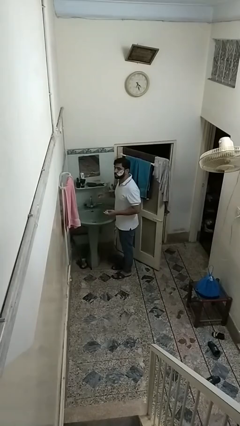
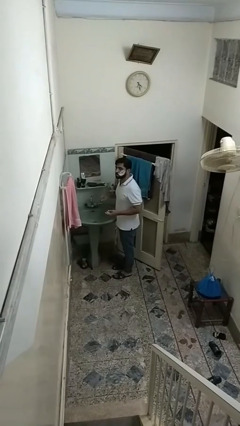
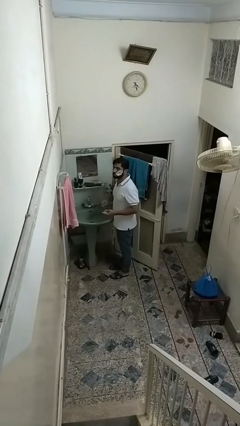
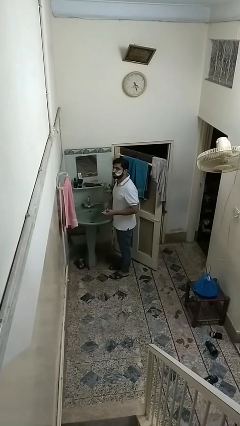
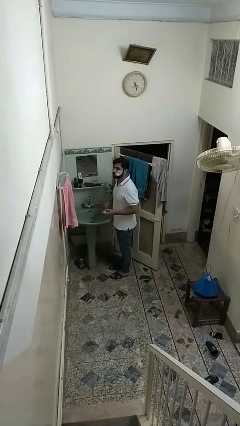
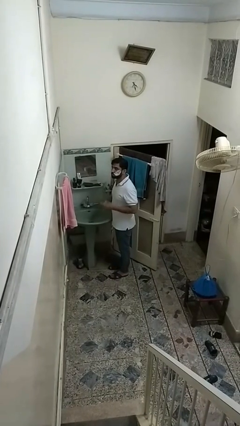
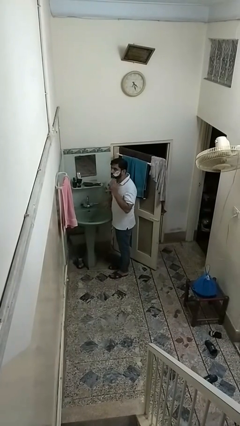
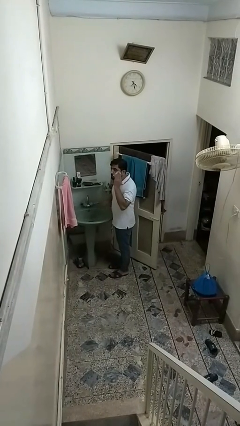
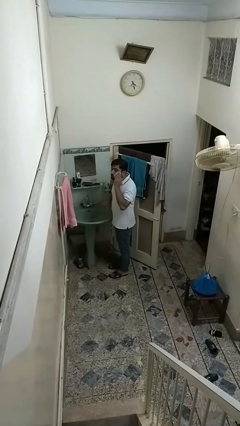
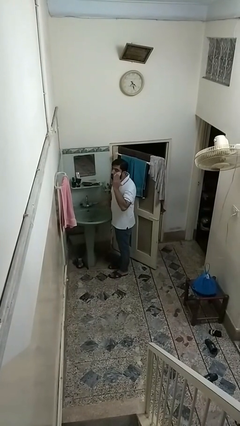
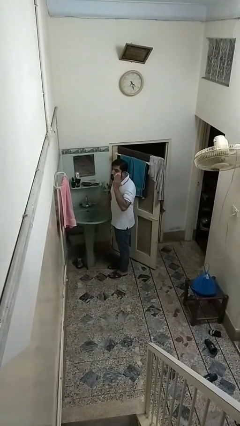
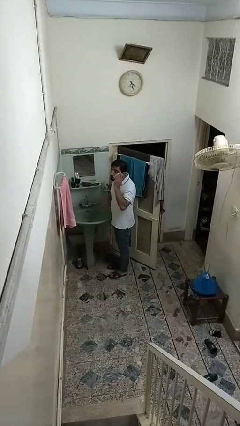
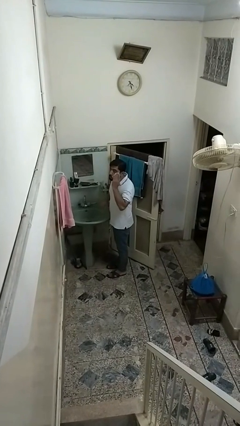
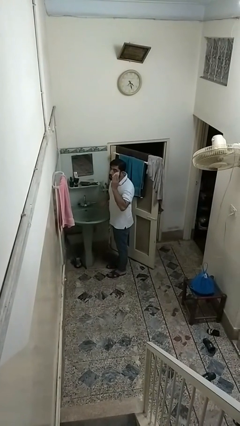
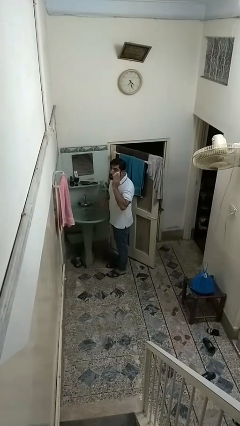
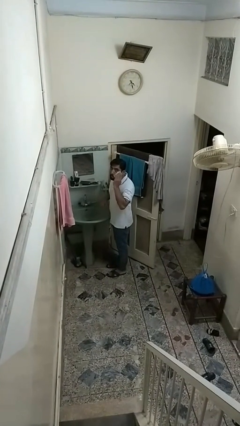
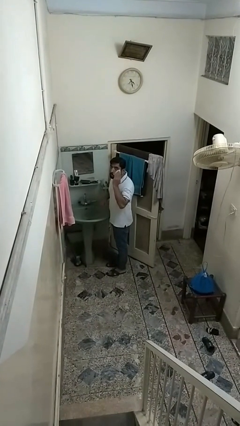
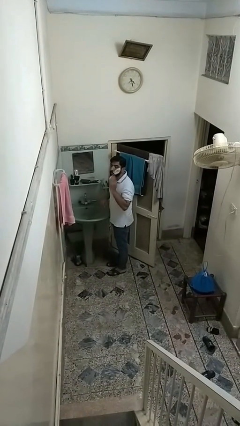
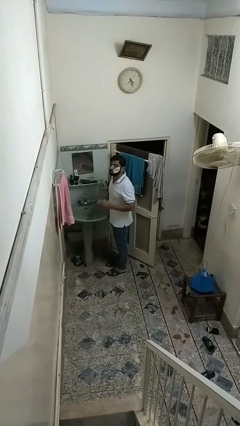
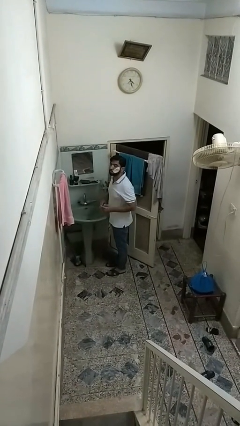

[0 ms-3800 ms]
person applies shaving cream

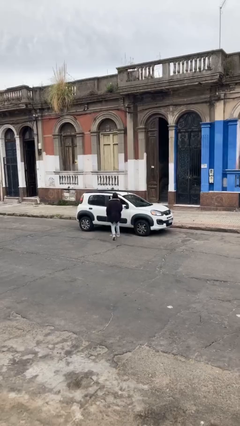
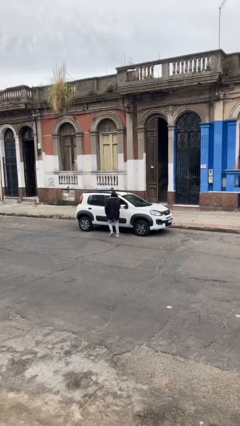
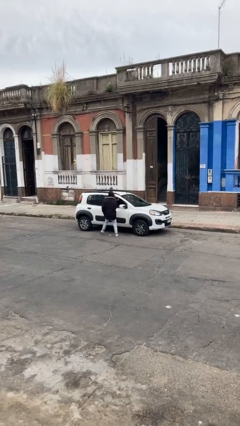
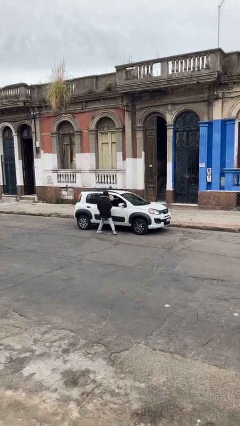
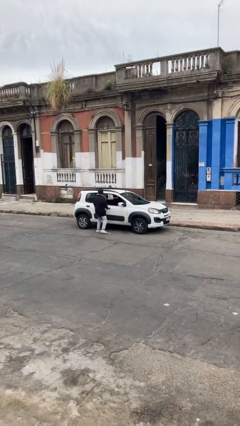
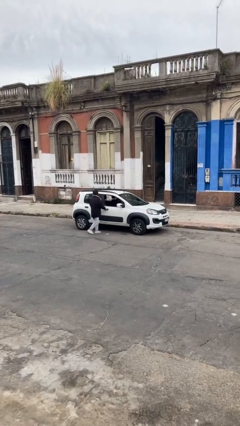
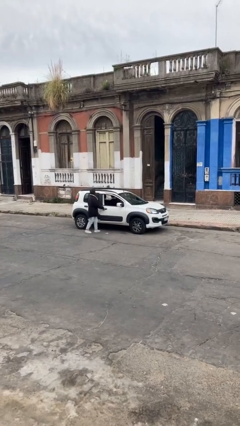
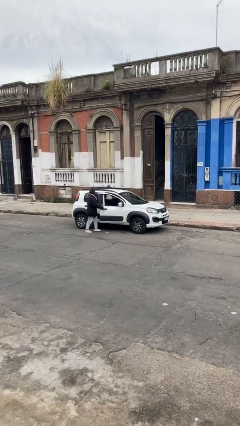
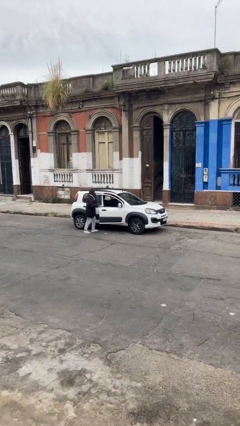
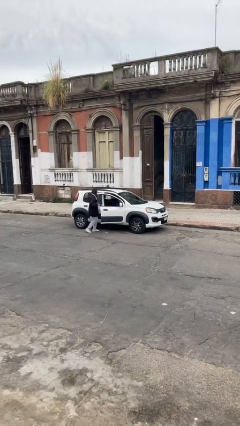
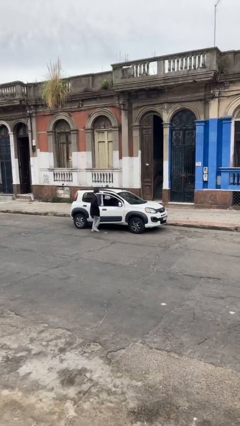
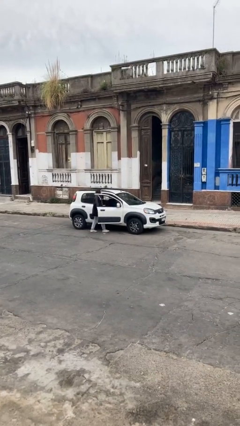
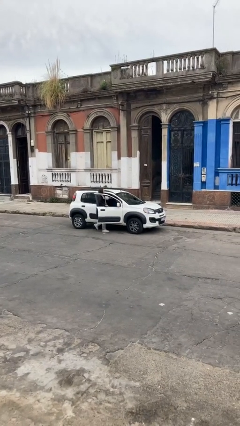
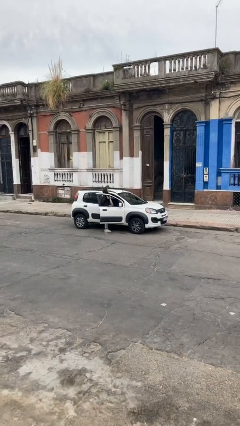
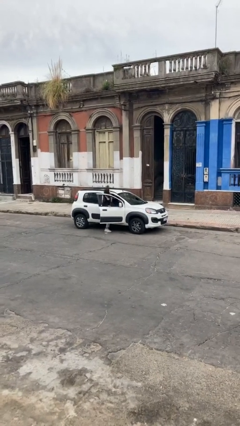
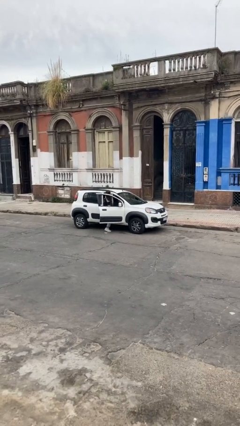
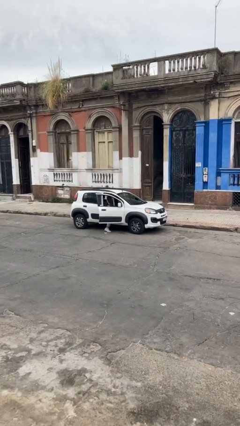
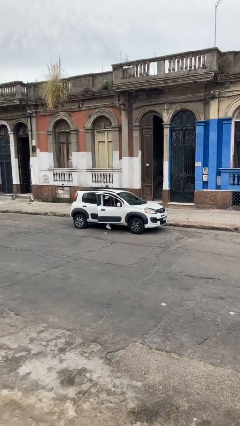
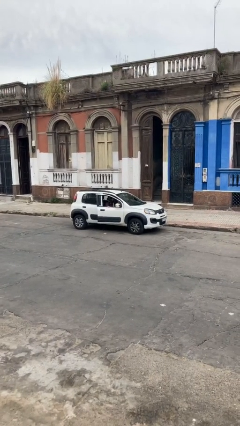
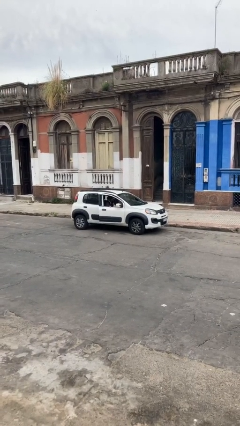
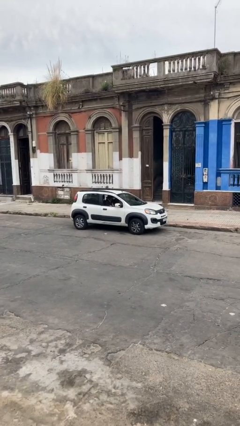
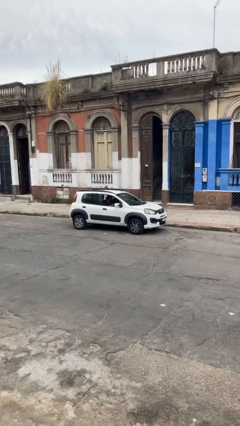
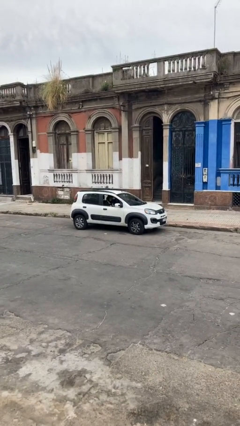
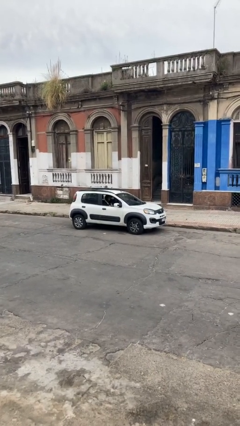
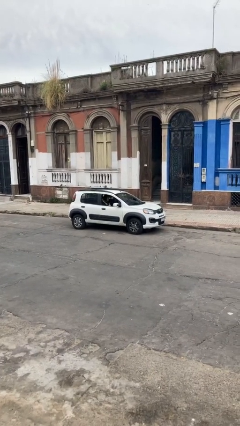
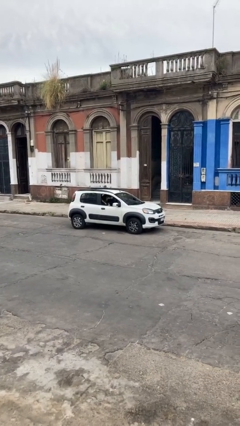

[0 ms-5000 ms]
car picks up person

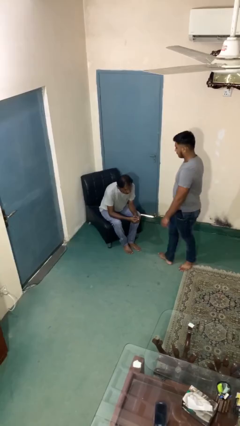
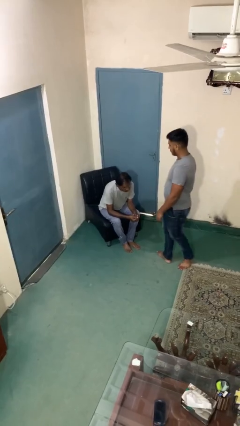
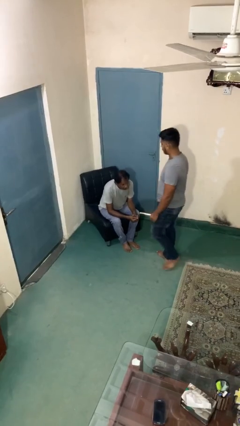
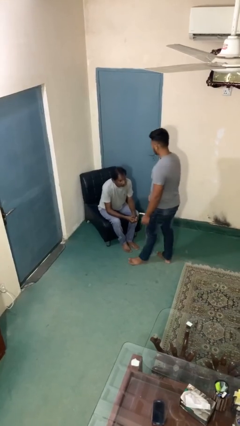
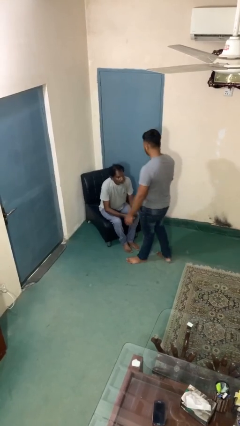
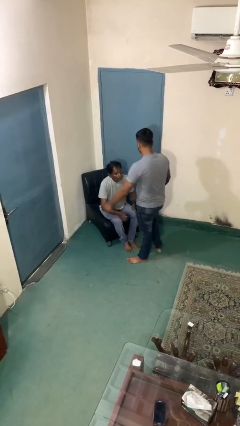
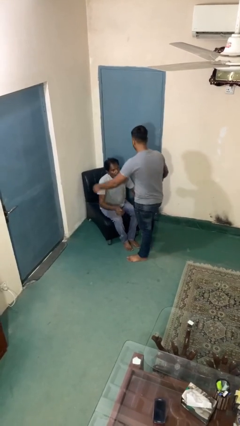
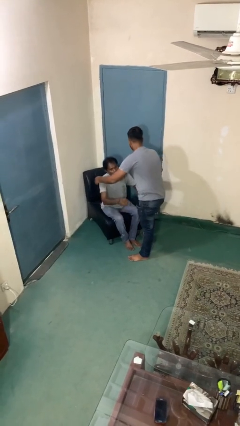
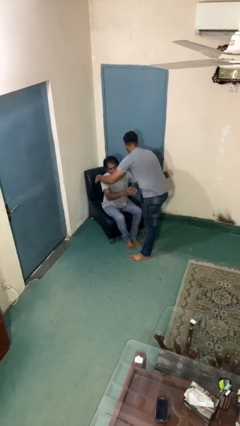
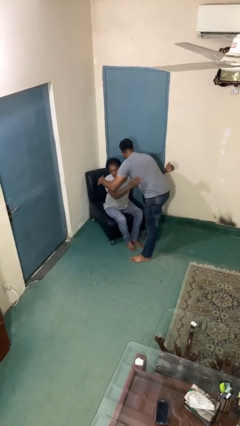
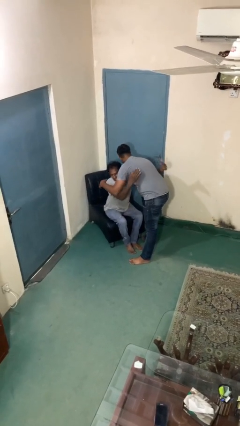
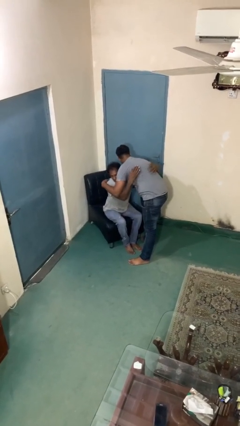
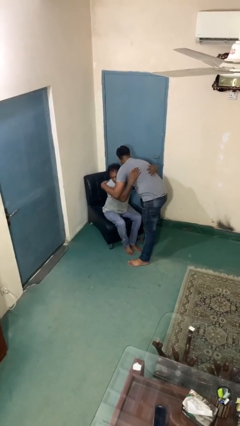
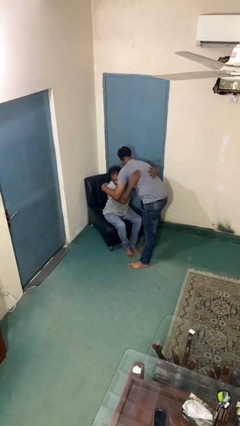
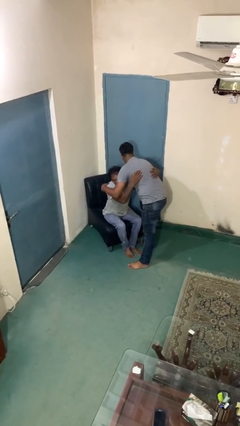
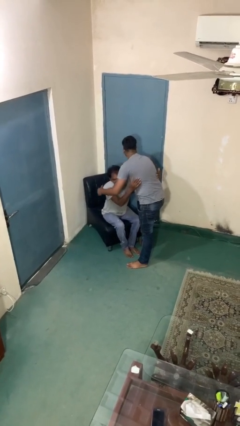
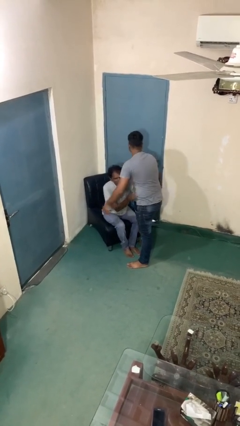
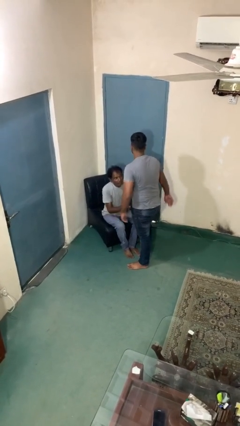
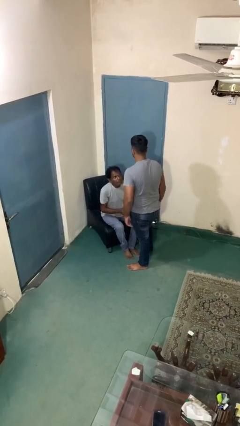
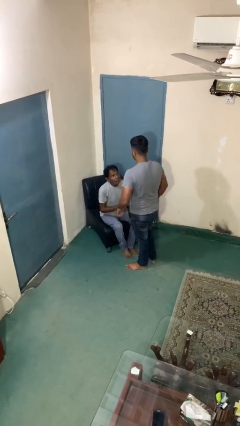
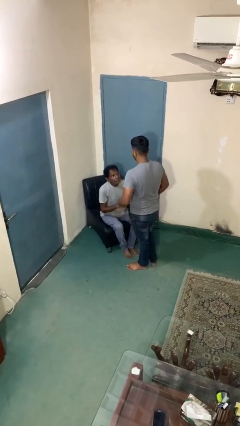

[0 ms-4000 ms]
person embraces person

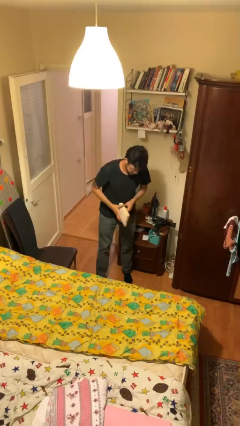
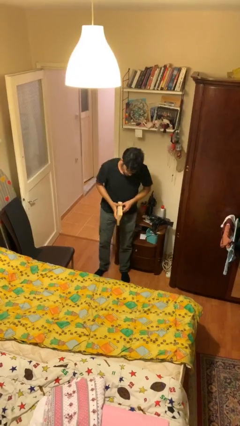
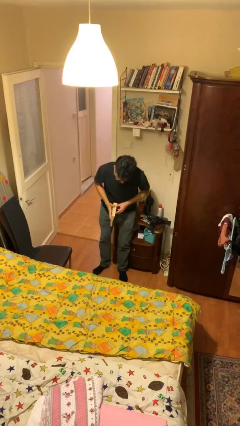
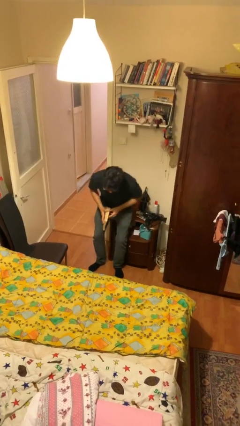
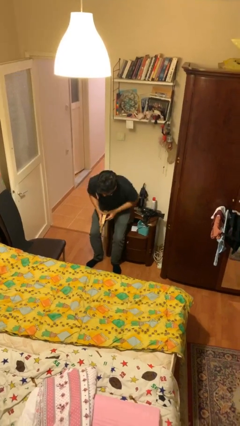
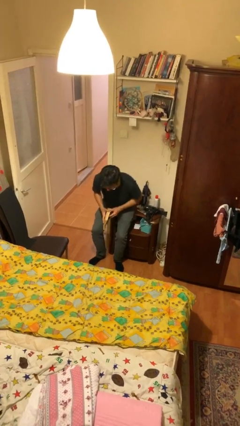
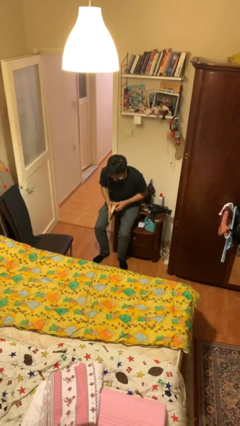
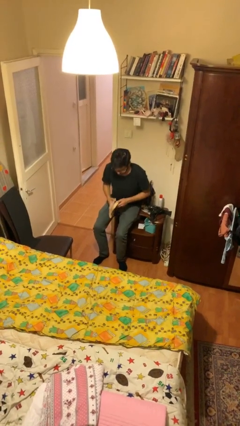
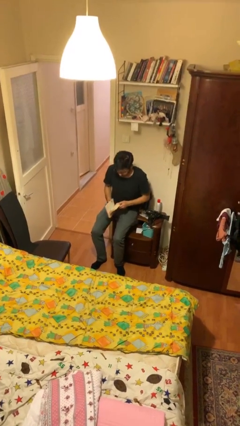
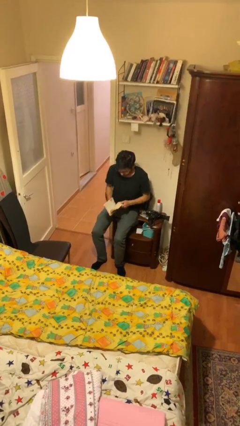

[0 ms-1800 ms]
person sits down

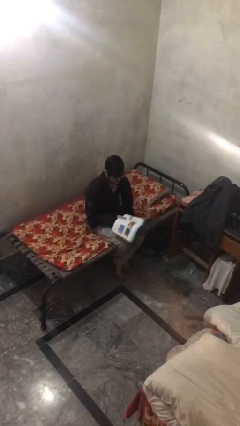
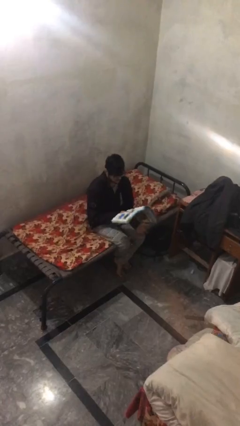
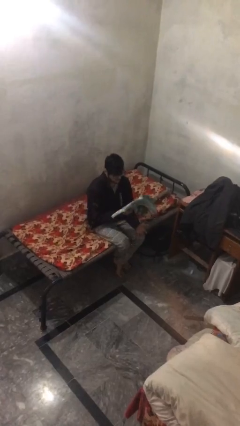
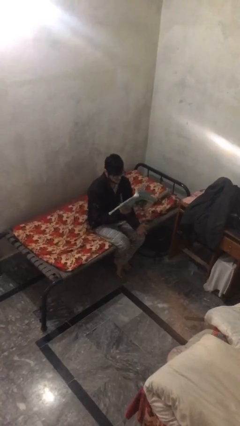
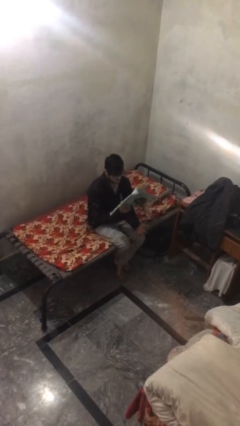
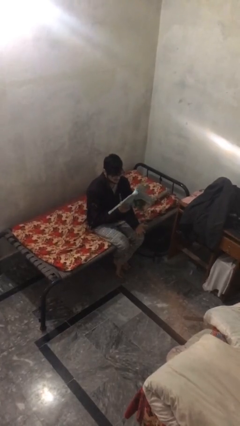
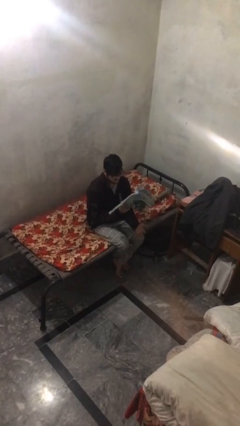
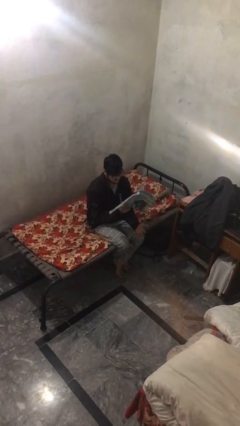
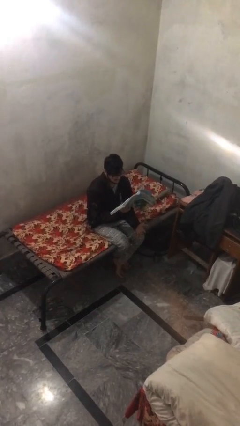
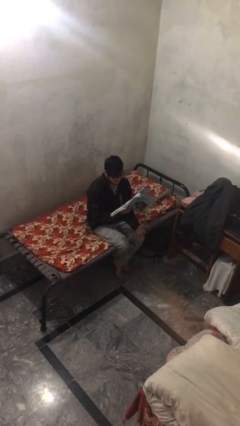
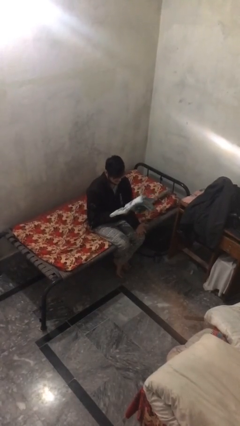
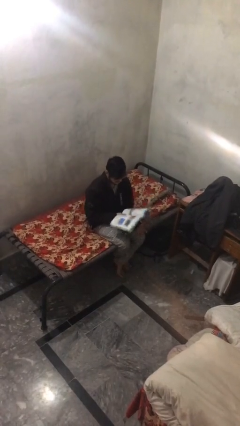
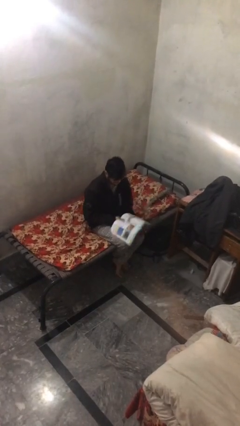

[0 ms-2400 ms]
person reads document
